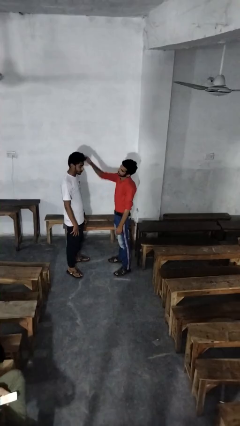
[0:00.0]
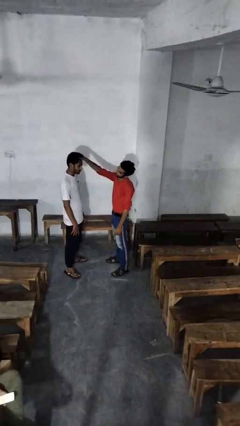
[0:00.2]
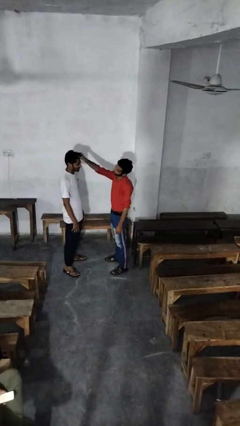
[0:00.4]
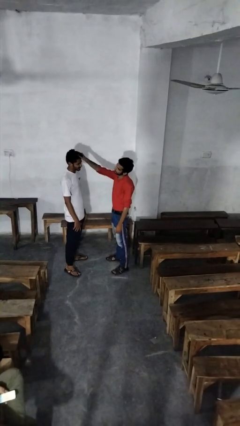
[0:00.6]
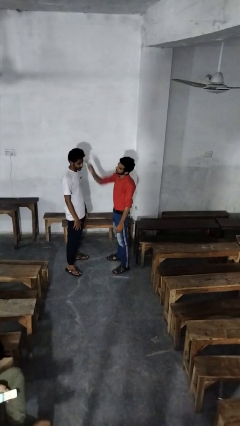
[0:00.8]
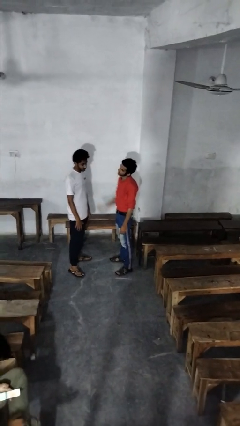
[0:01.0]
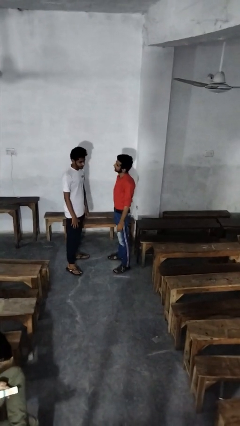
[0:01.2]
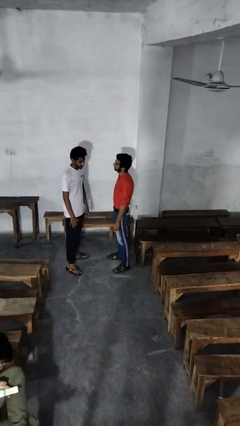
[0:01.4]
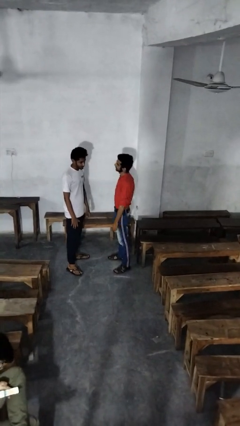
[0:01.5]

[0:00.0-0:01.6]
person grabs person by hair

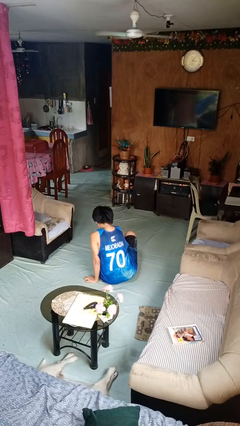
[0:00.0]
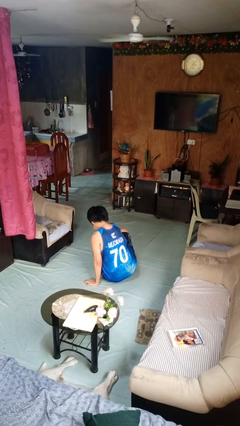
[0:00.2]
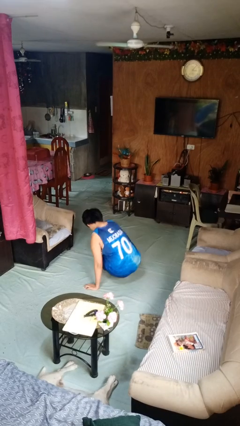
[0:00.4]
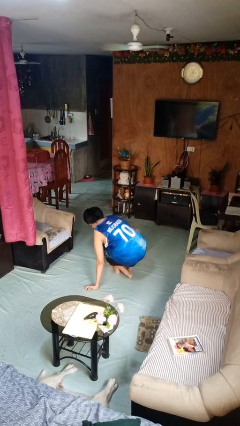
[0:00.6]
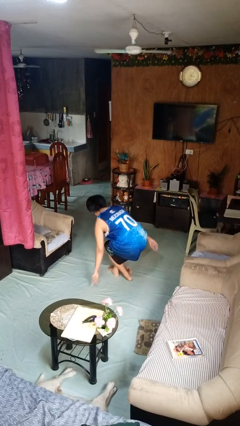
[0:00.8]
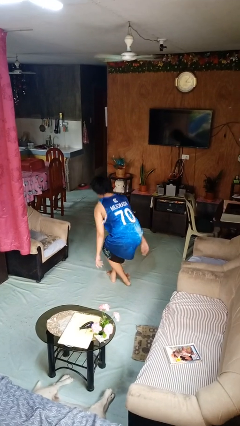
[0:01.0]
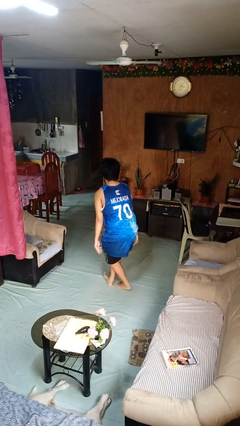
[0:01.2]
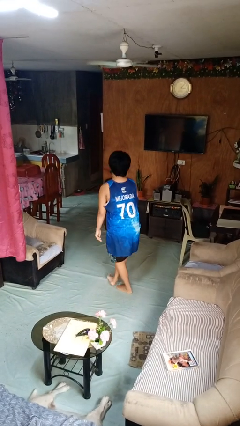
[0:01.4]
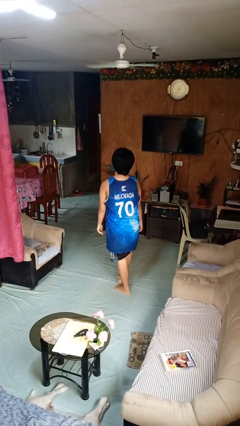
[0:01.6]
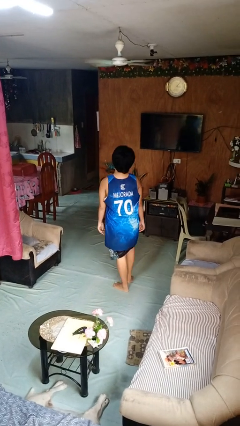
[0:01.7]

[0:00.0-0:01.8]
person stands up from floor

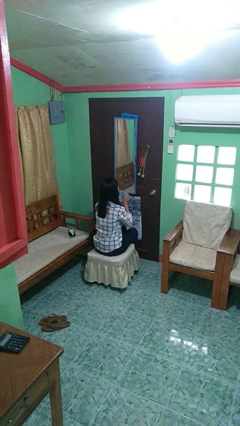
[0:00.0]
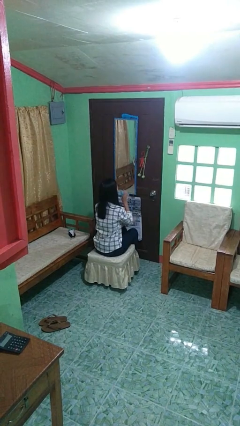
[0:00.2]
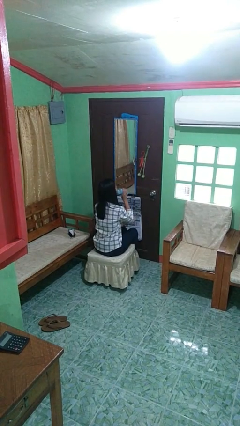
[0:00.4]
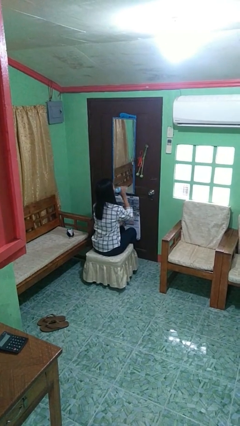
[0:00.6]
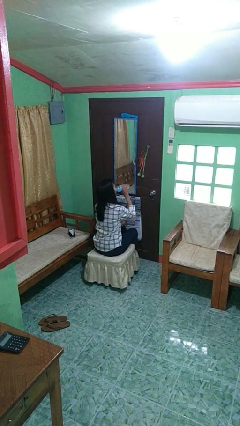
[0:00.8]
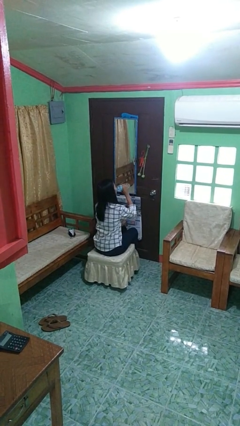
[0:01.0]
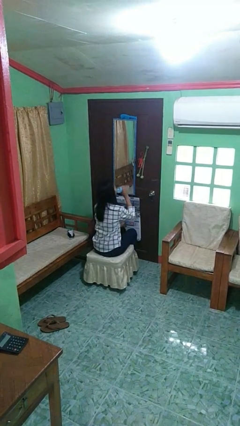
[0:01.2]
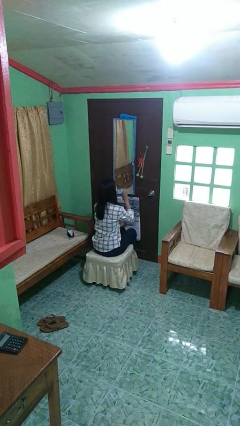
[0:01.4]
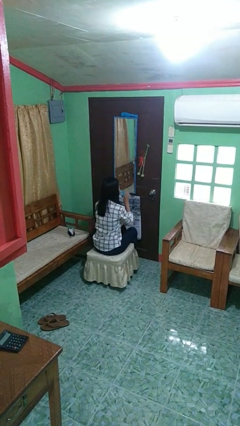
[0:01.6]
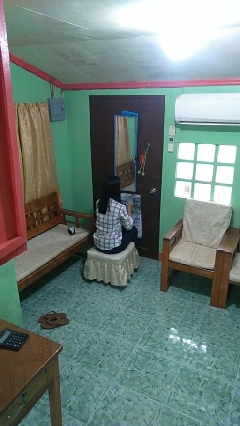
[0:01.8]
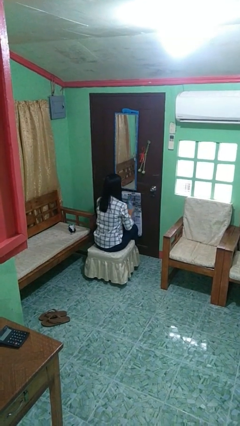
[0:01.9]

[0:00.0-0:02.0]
person drinks from bottle

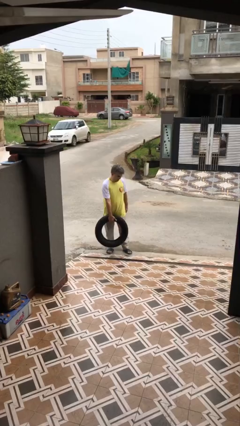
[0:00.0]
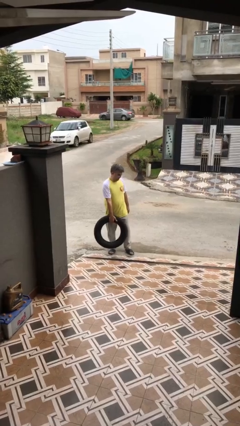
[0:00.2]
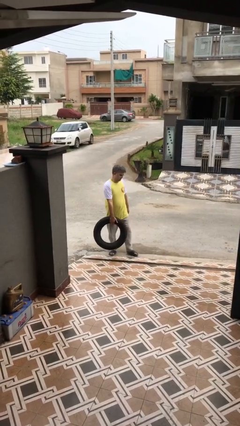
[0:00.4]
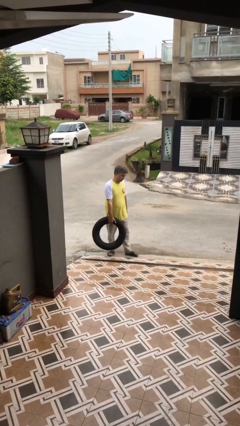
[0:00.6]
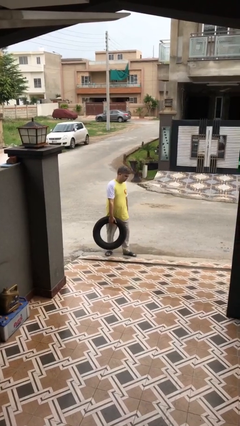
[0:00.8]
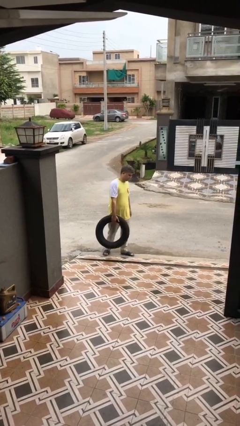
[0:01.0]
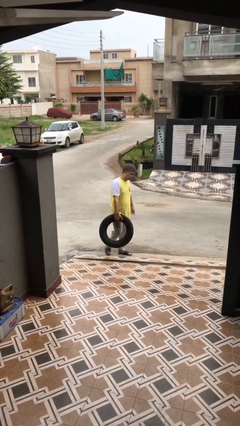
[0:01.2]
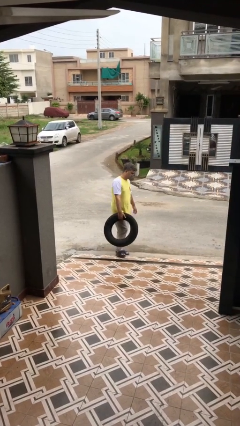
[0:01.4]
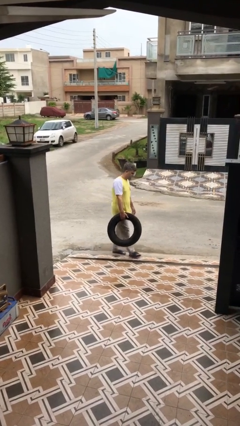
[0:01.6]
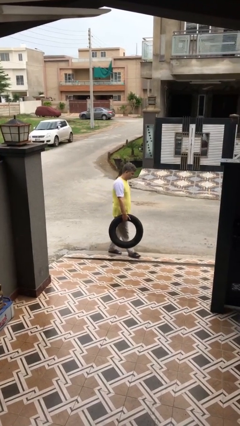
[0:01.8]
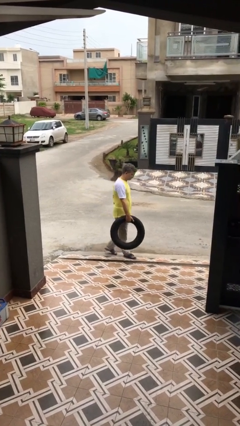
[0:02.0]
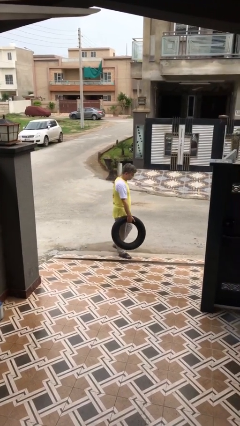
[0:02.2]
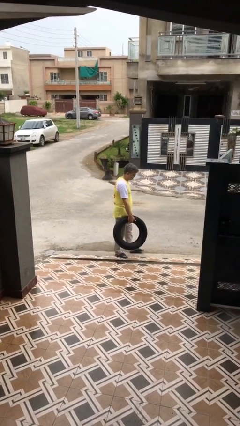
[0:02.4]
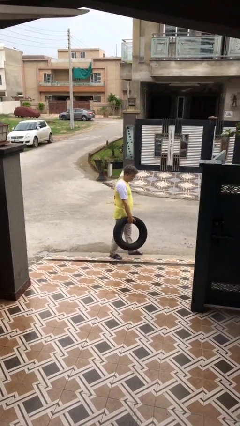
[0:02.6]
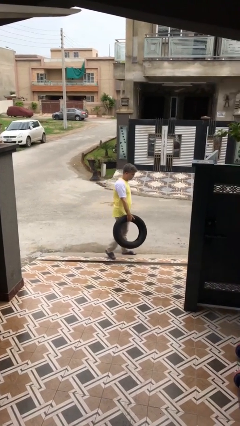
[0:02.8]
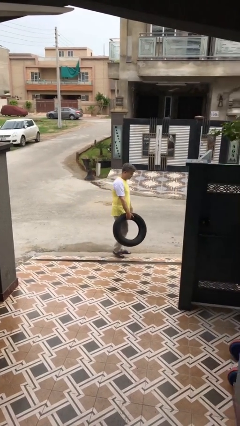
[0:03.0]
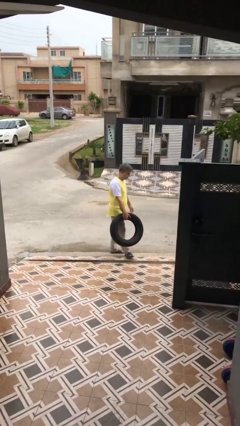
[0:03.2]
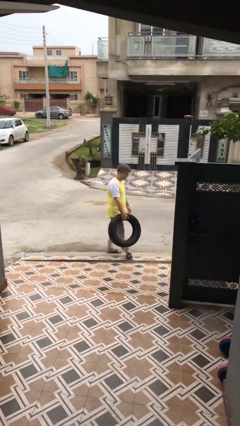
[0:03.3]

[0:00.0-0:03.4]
person carries heavy object

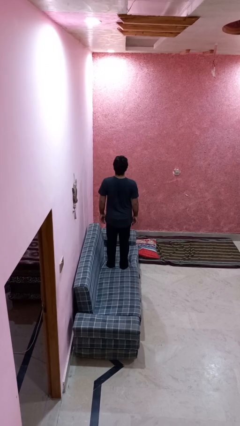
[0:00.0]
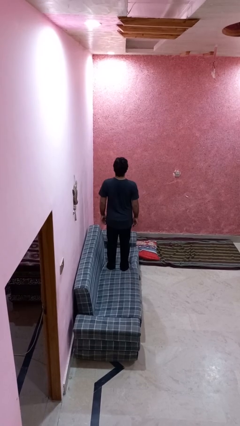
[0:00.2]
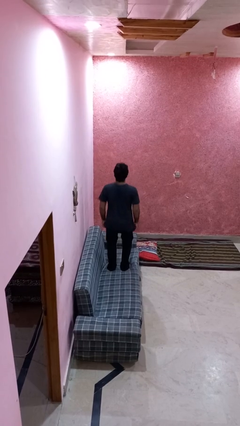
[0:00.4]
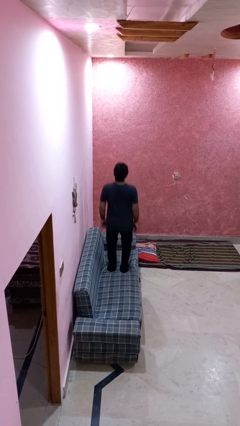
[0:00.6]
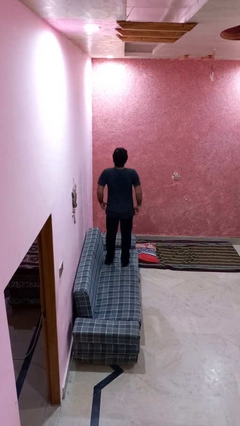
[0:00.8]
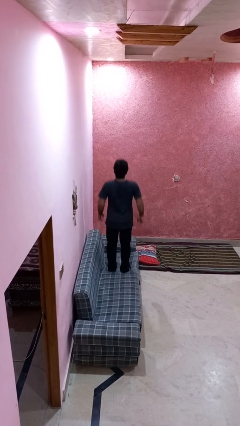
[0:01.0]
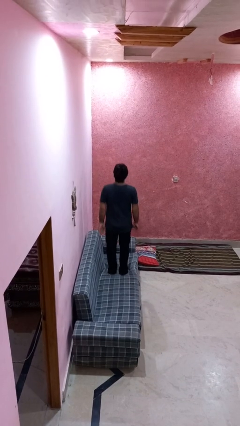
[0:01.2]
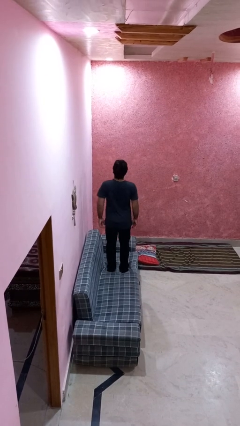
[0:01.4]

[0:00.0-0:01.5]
person jumps on couch

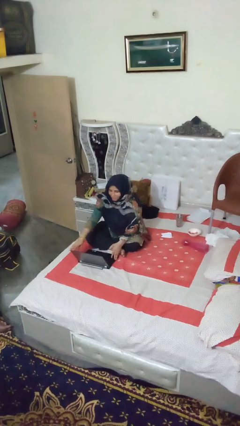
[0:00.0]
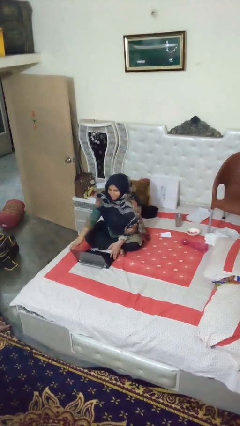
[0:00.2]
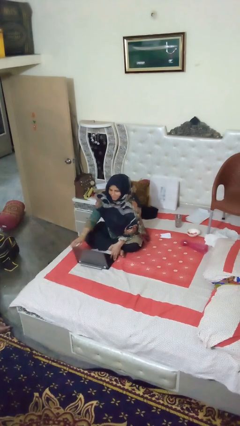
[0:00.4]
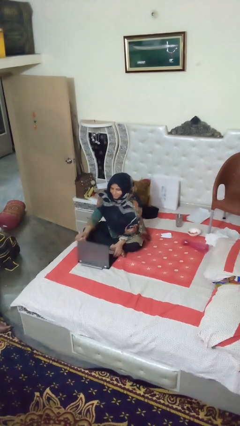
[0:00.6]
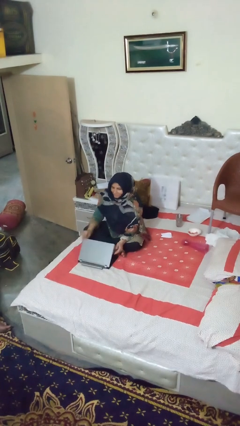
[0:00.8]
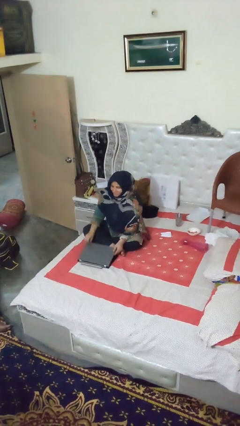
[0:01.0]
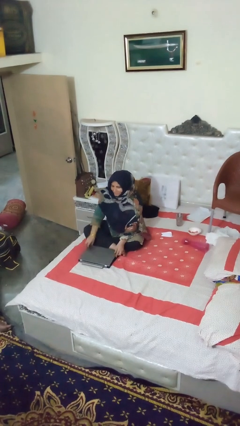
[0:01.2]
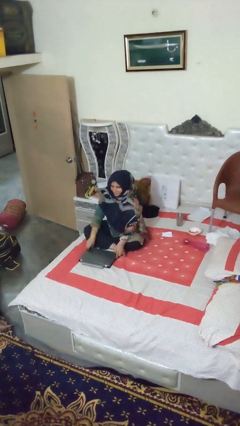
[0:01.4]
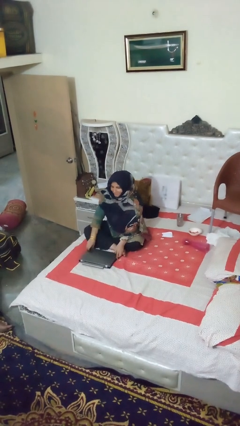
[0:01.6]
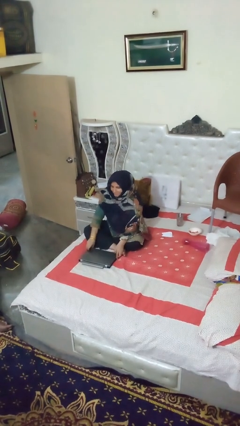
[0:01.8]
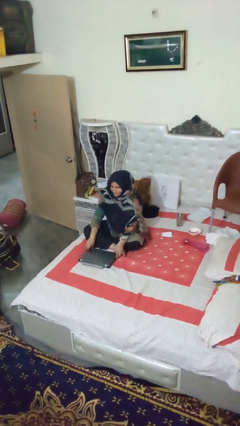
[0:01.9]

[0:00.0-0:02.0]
person closes laptop

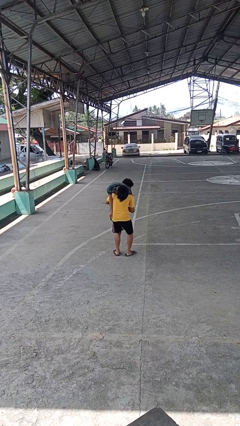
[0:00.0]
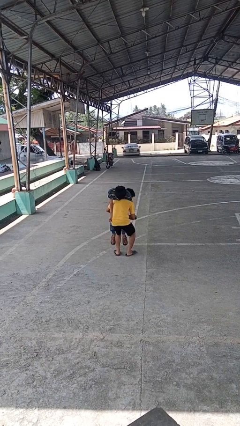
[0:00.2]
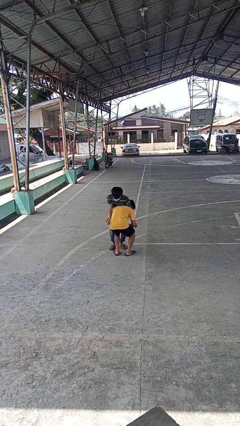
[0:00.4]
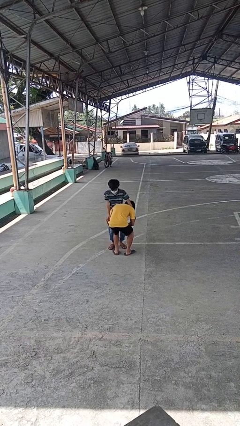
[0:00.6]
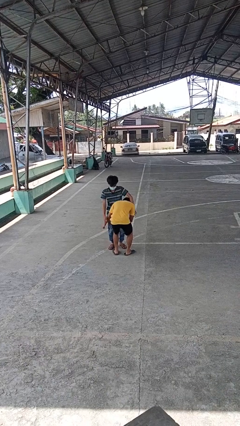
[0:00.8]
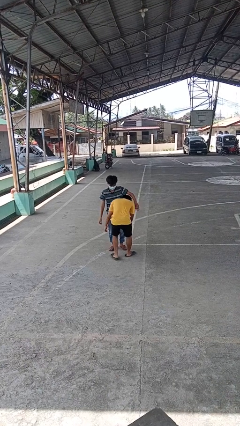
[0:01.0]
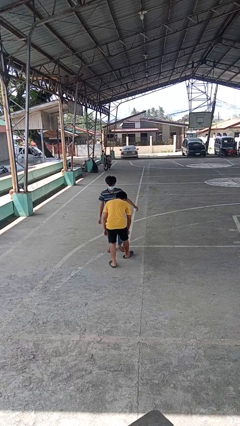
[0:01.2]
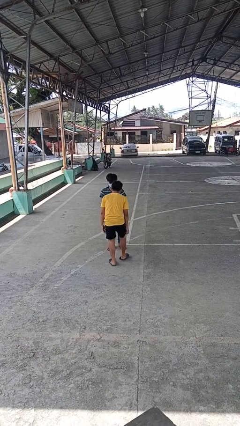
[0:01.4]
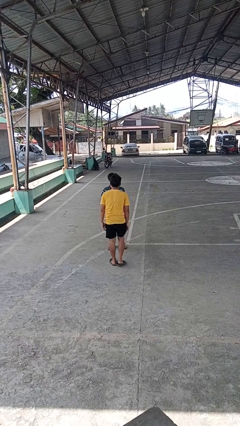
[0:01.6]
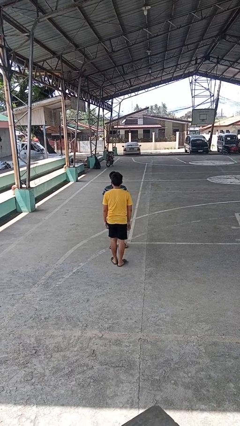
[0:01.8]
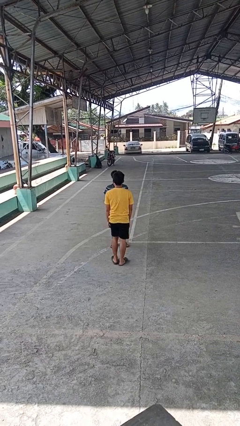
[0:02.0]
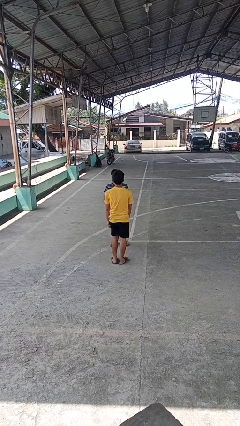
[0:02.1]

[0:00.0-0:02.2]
person puts down person

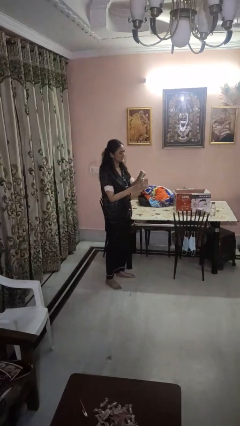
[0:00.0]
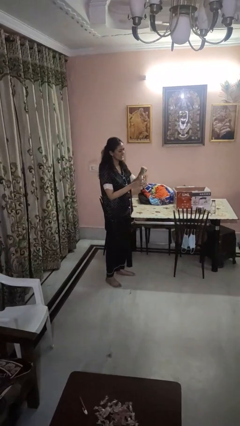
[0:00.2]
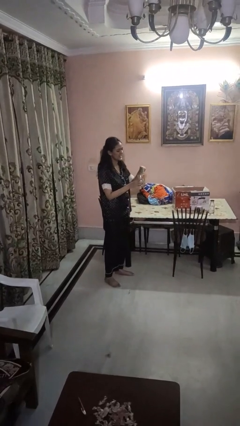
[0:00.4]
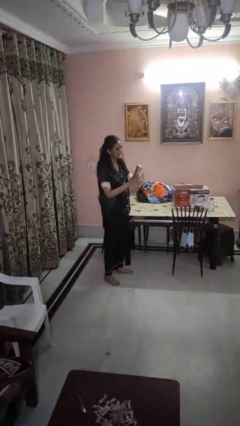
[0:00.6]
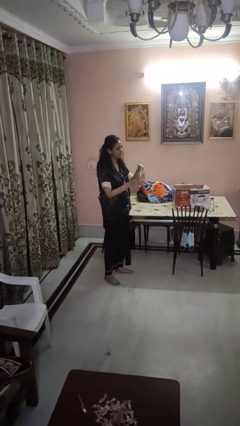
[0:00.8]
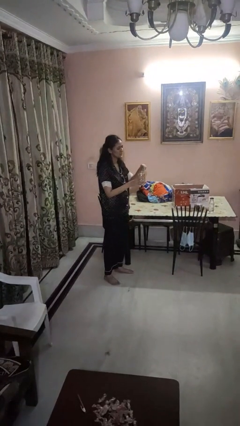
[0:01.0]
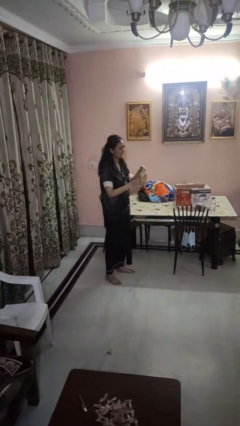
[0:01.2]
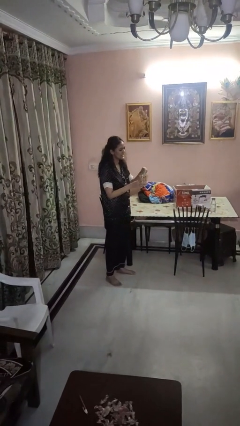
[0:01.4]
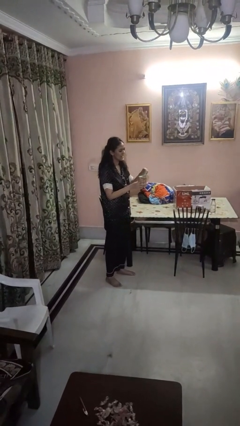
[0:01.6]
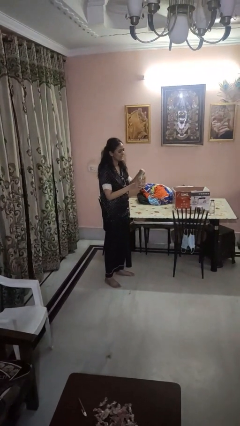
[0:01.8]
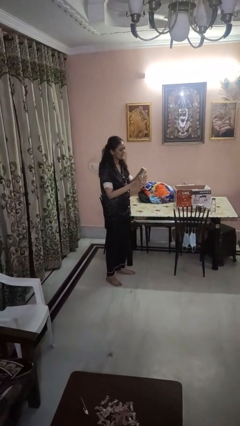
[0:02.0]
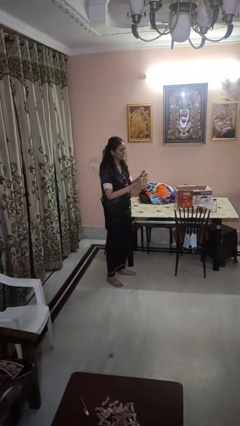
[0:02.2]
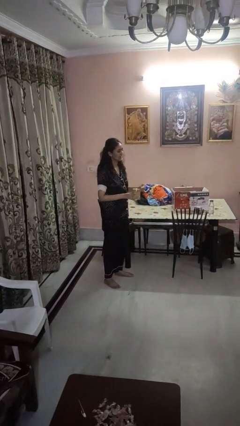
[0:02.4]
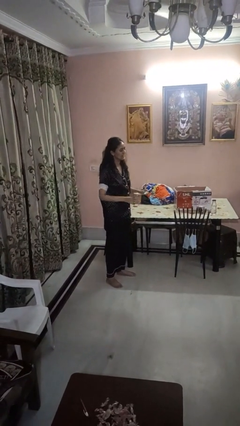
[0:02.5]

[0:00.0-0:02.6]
person opens can with can opener
